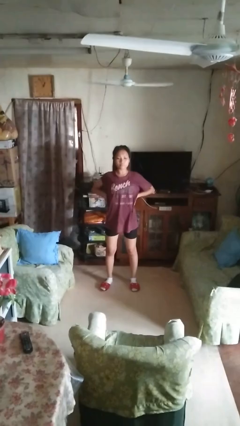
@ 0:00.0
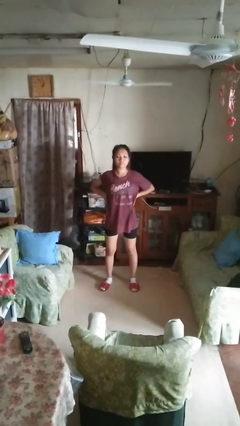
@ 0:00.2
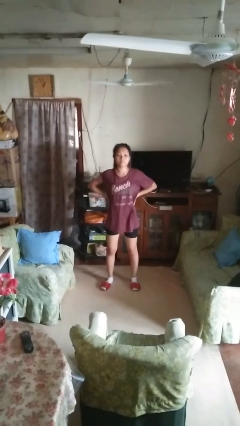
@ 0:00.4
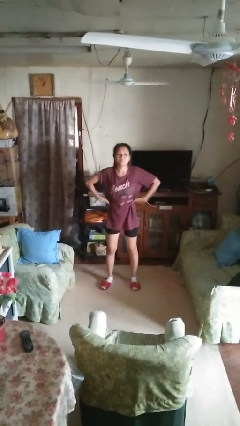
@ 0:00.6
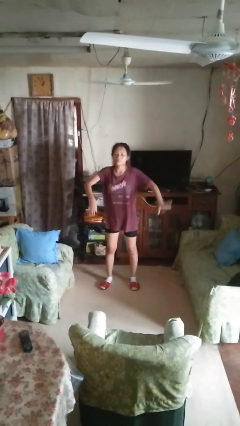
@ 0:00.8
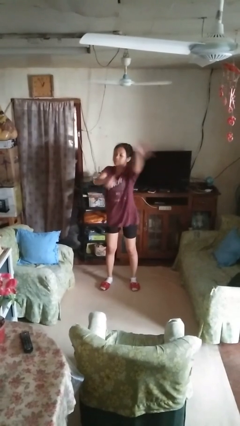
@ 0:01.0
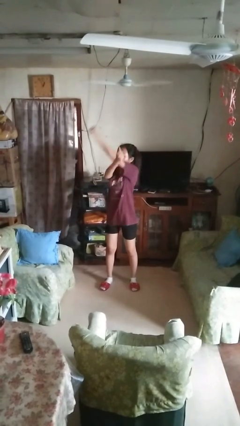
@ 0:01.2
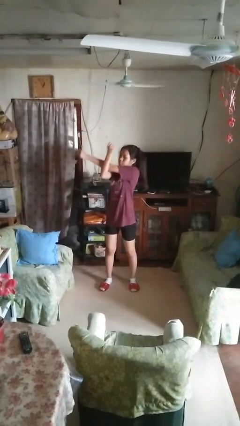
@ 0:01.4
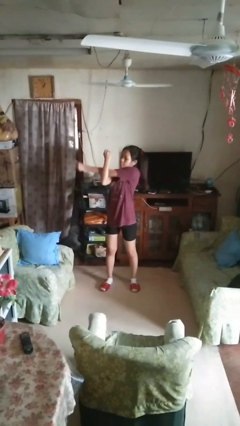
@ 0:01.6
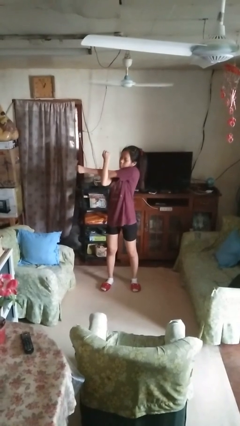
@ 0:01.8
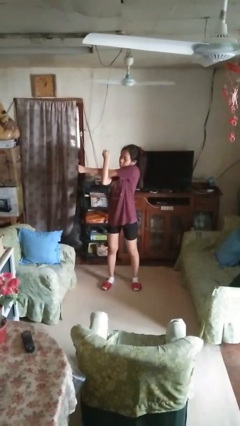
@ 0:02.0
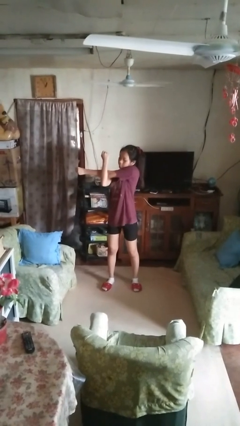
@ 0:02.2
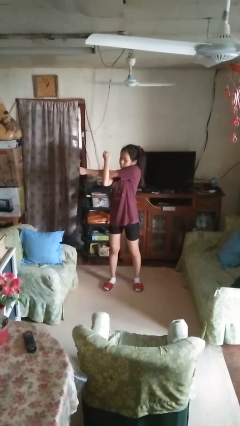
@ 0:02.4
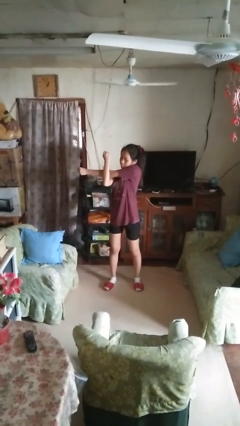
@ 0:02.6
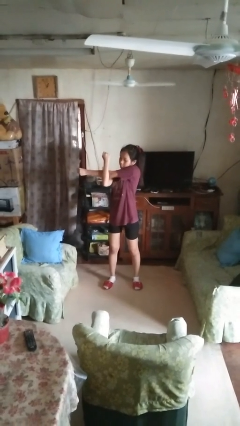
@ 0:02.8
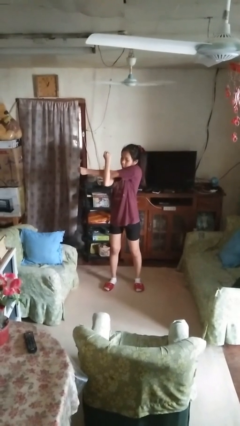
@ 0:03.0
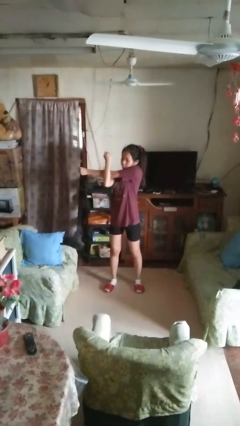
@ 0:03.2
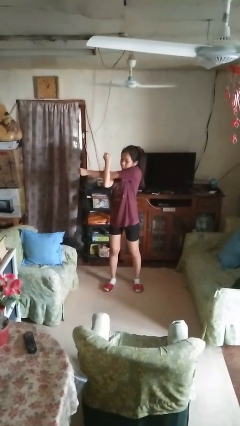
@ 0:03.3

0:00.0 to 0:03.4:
person stretches arms to side

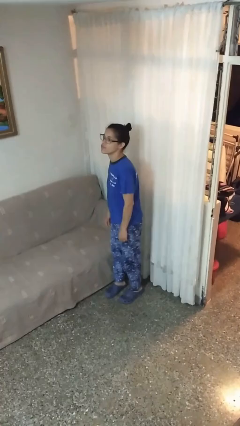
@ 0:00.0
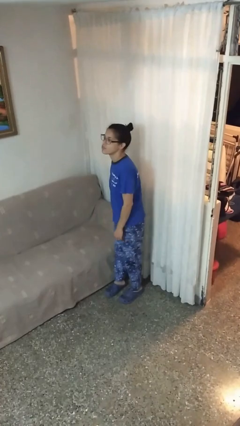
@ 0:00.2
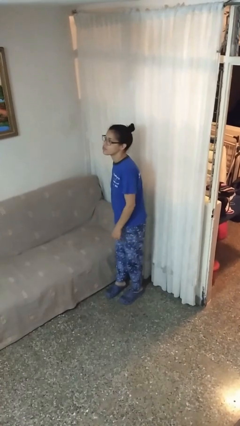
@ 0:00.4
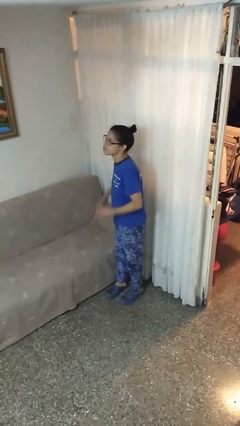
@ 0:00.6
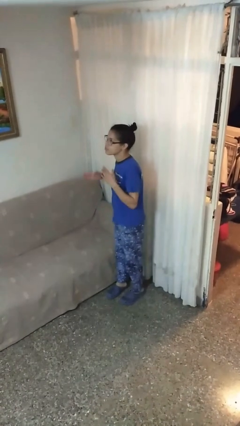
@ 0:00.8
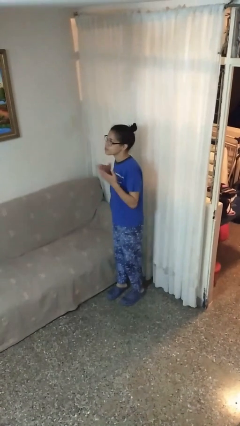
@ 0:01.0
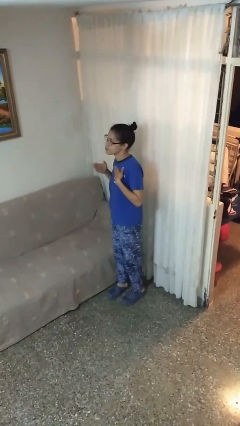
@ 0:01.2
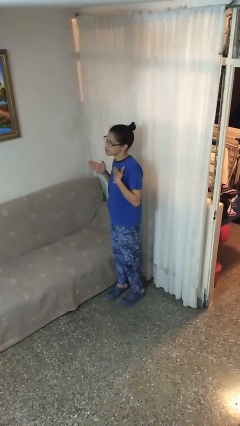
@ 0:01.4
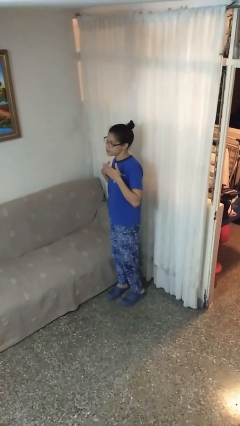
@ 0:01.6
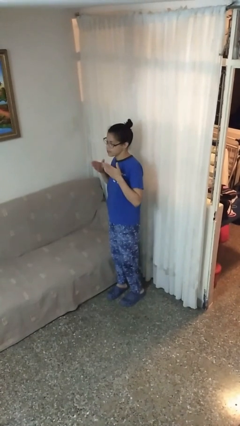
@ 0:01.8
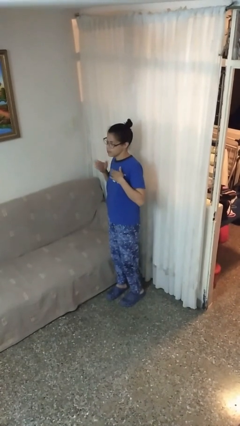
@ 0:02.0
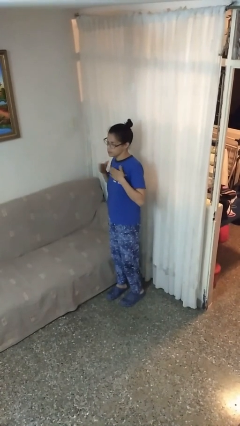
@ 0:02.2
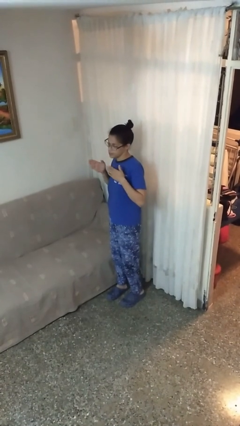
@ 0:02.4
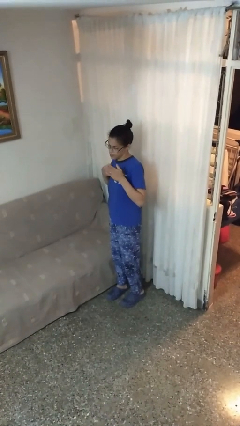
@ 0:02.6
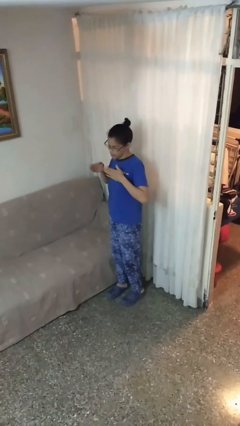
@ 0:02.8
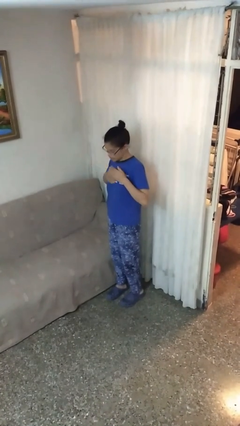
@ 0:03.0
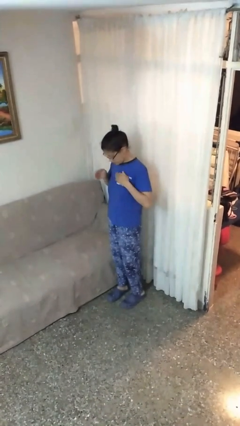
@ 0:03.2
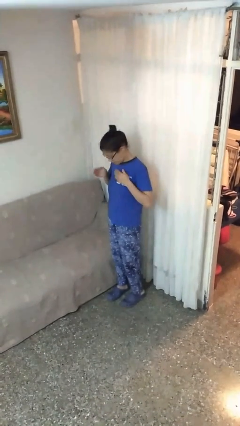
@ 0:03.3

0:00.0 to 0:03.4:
person drums on chest

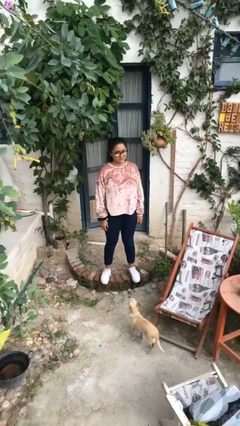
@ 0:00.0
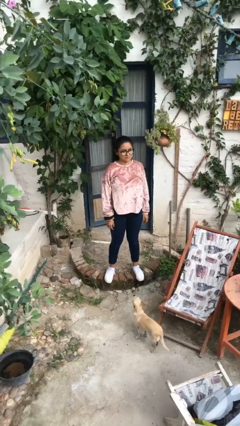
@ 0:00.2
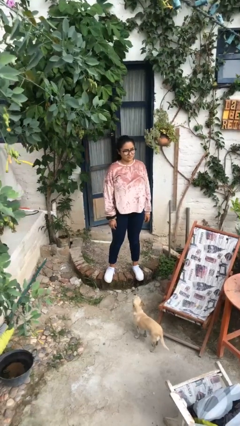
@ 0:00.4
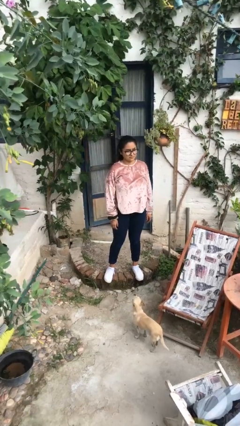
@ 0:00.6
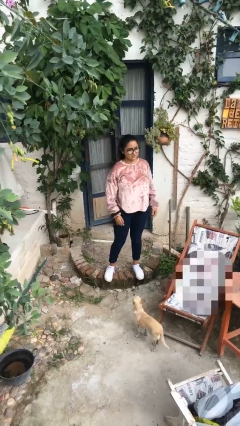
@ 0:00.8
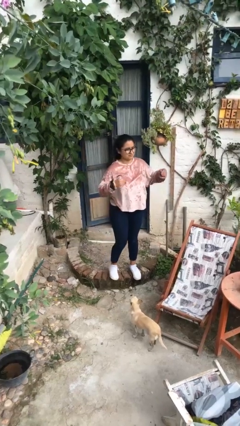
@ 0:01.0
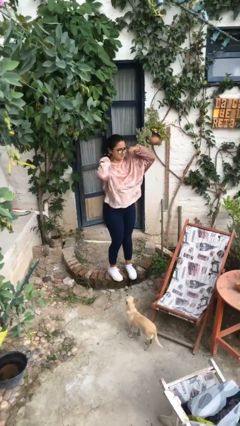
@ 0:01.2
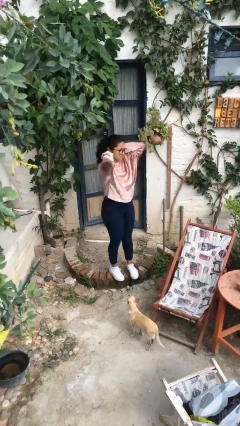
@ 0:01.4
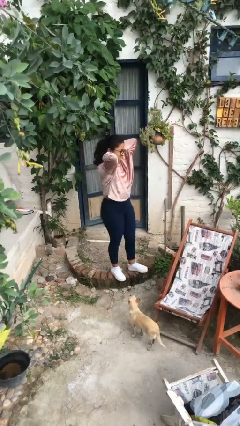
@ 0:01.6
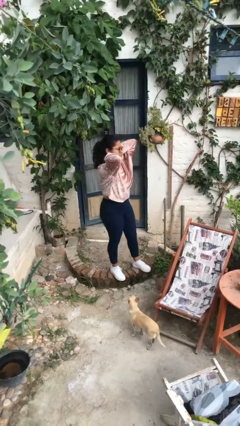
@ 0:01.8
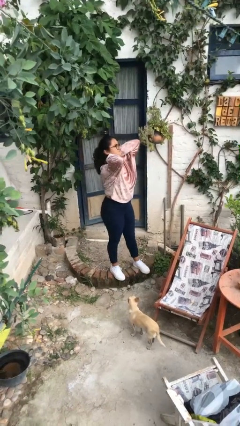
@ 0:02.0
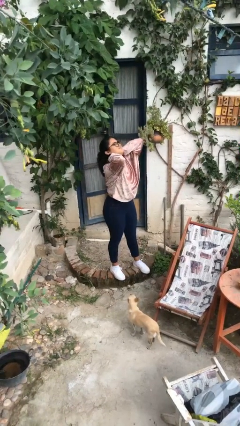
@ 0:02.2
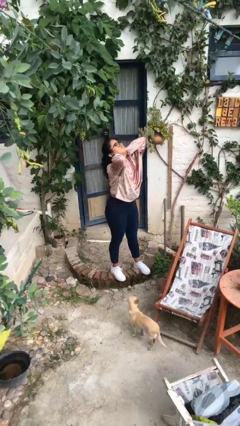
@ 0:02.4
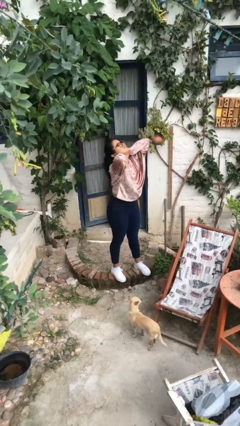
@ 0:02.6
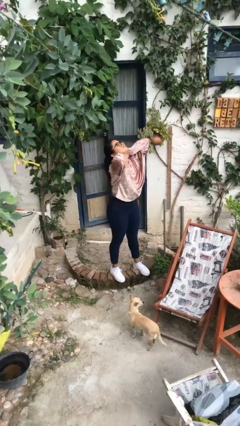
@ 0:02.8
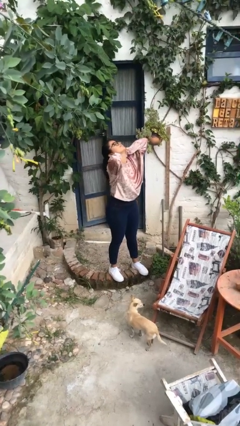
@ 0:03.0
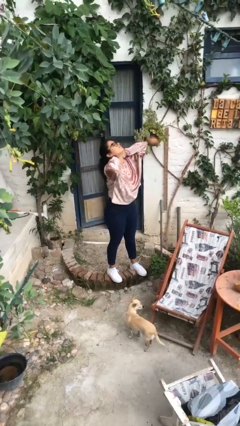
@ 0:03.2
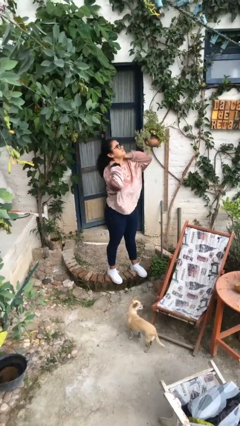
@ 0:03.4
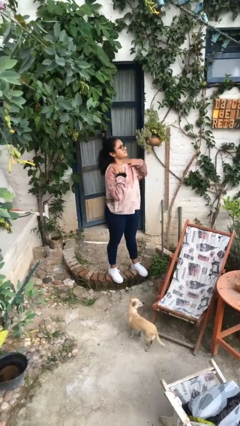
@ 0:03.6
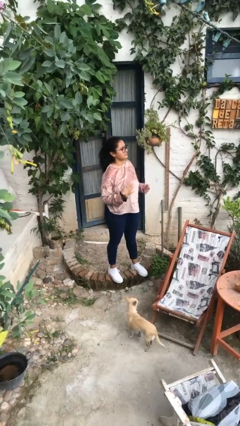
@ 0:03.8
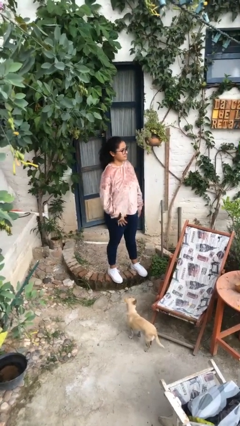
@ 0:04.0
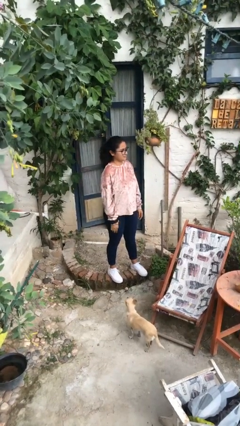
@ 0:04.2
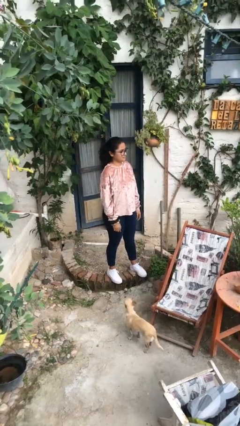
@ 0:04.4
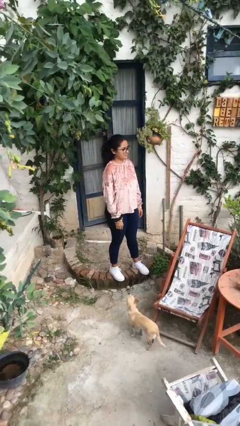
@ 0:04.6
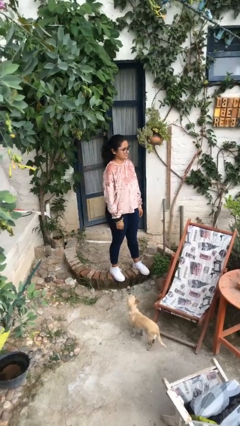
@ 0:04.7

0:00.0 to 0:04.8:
person rubs neck

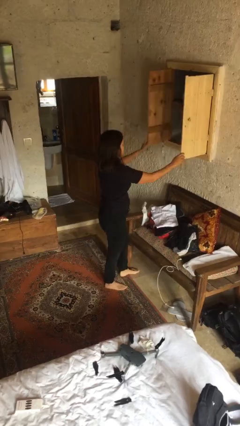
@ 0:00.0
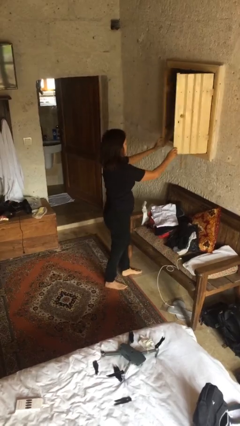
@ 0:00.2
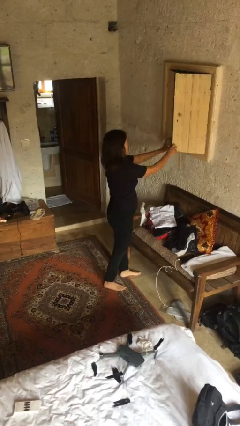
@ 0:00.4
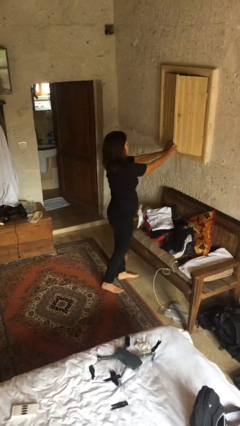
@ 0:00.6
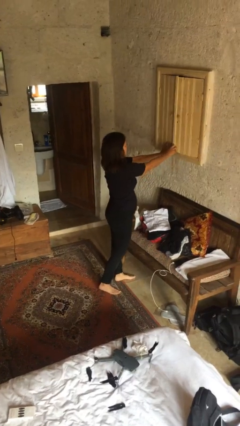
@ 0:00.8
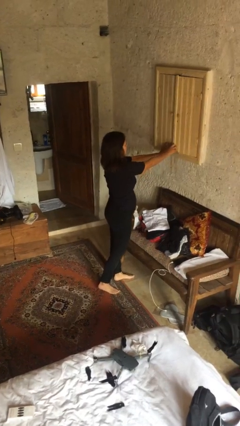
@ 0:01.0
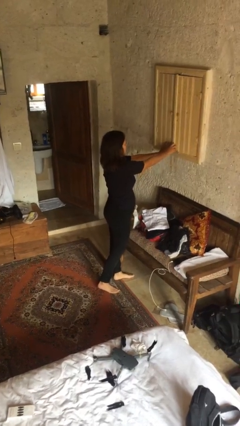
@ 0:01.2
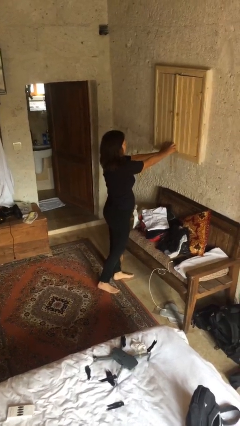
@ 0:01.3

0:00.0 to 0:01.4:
person closes dresser drawer

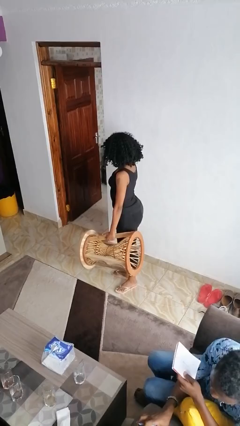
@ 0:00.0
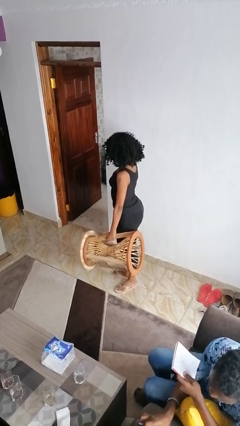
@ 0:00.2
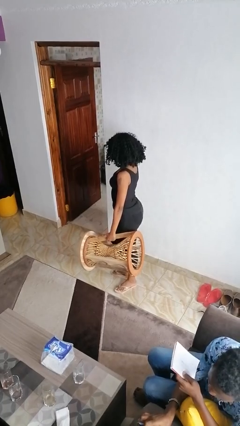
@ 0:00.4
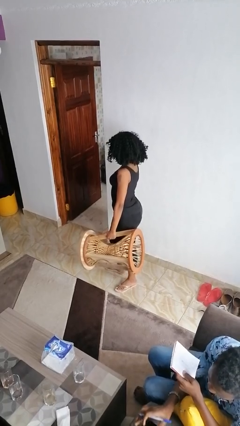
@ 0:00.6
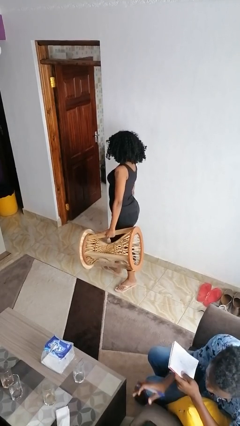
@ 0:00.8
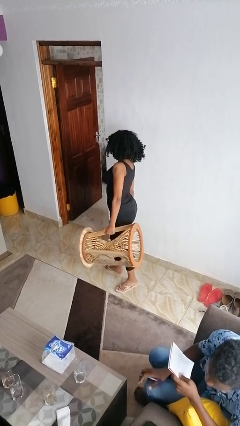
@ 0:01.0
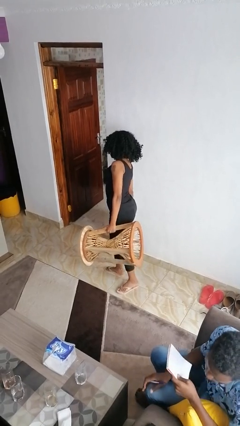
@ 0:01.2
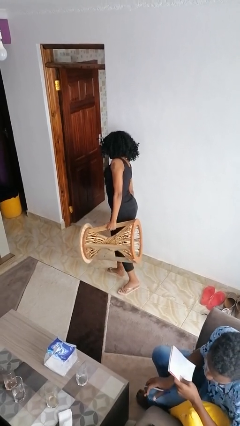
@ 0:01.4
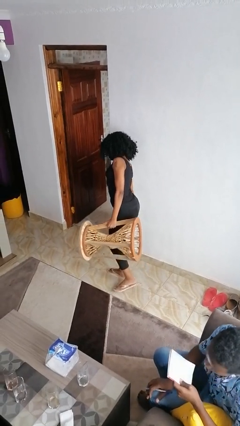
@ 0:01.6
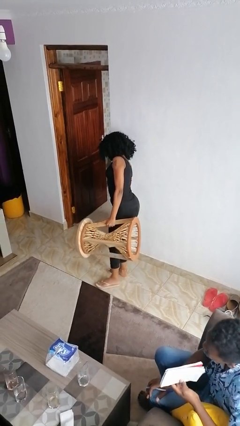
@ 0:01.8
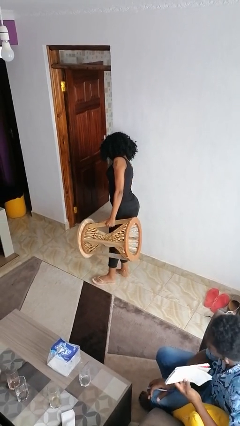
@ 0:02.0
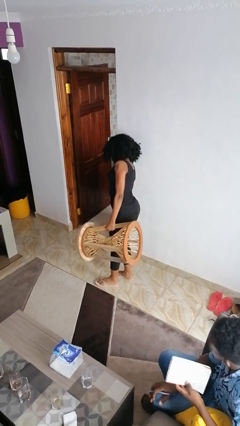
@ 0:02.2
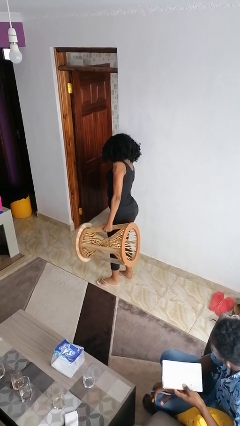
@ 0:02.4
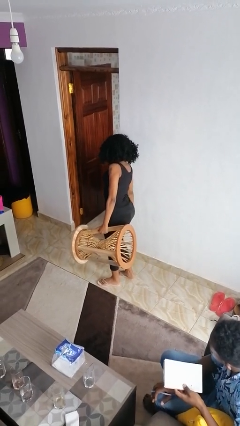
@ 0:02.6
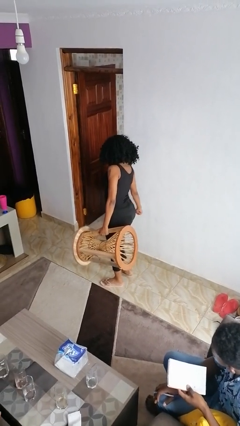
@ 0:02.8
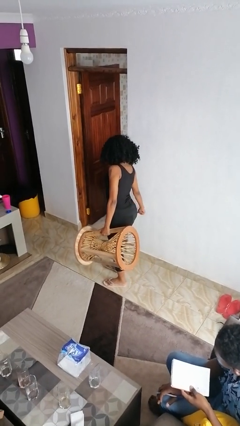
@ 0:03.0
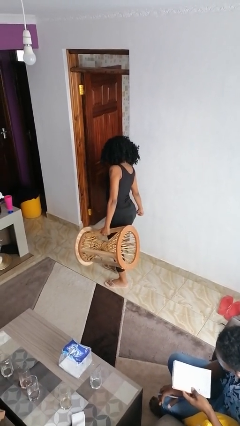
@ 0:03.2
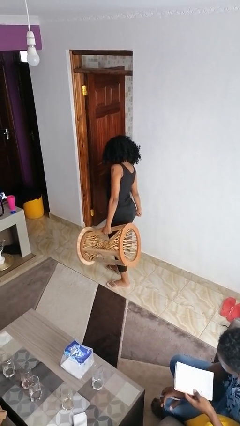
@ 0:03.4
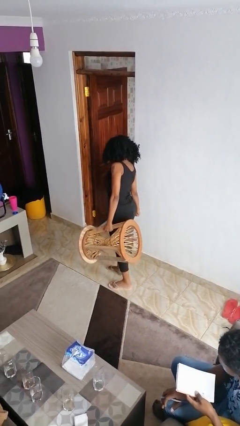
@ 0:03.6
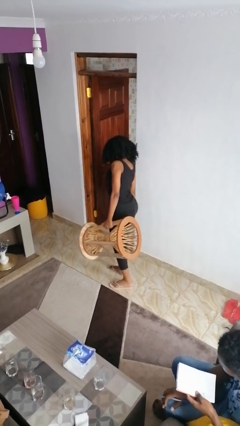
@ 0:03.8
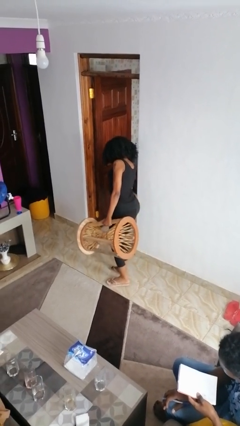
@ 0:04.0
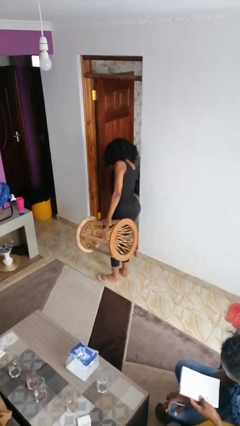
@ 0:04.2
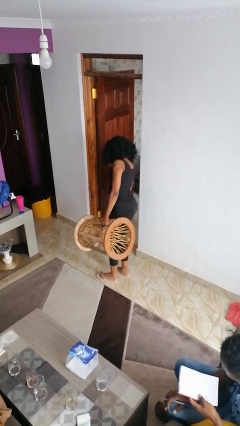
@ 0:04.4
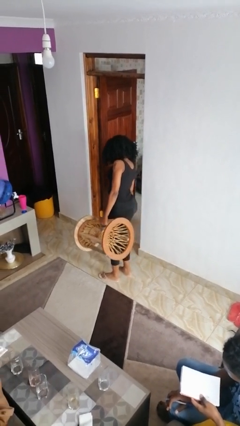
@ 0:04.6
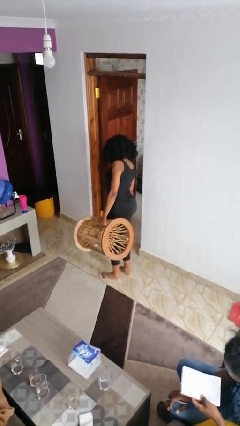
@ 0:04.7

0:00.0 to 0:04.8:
person carries furniture
